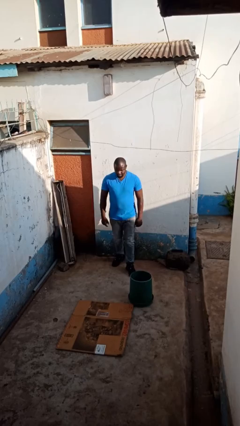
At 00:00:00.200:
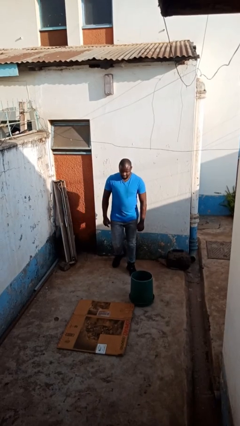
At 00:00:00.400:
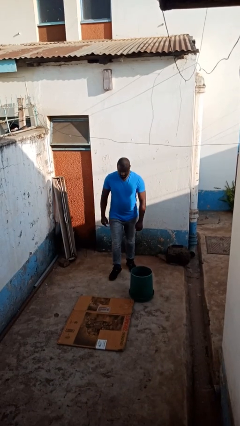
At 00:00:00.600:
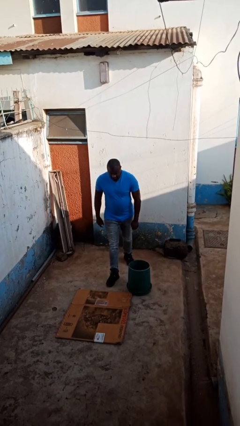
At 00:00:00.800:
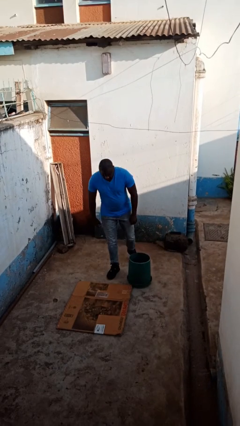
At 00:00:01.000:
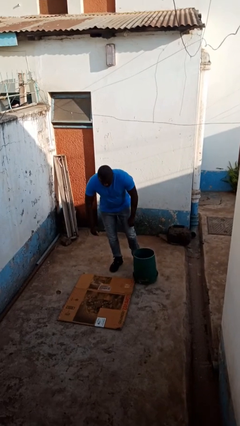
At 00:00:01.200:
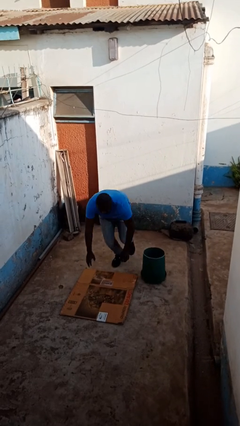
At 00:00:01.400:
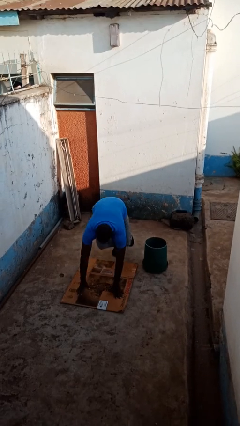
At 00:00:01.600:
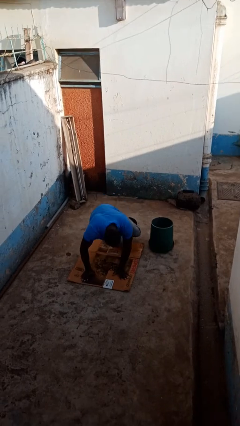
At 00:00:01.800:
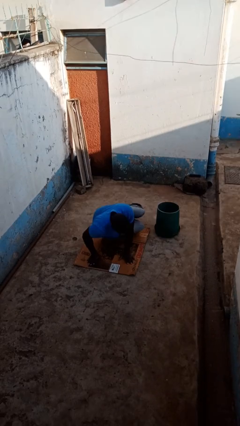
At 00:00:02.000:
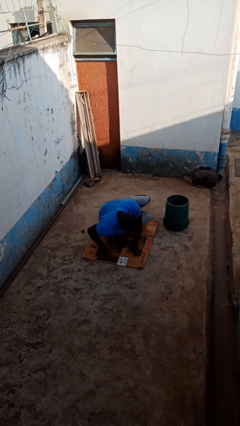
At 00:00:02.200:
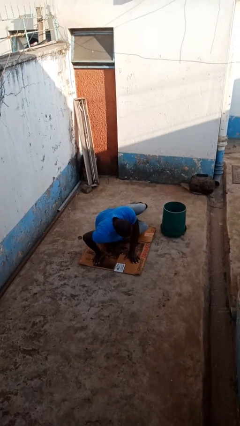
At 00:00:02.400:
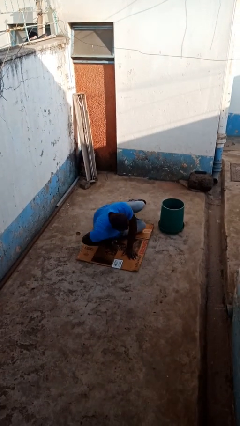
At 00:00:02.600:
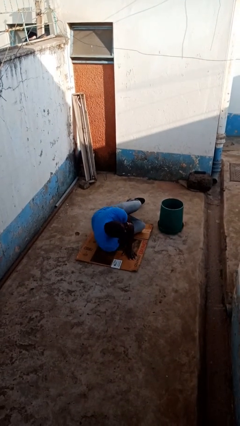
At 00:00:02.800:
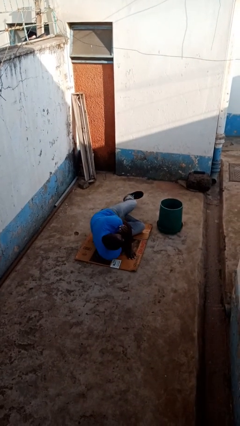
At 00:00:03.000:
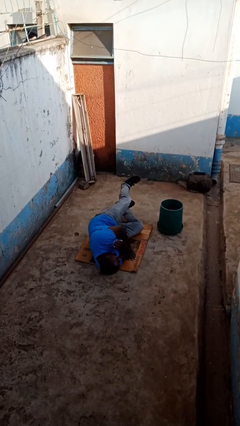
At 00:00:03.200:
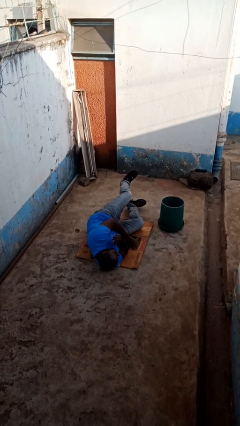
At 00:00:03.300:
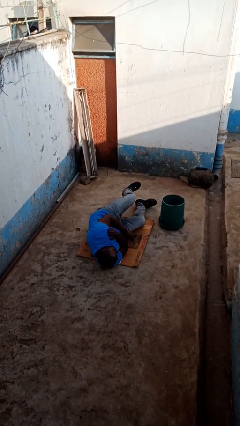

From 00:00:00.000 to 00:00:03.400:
person trips on object on floor

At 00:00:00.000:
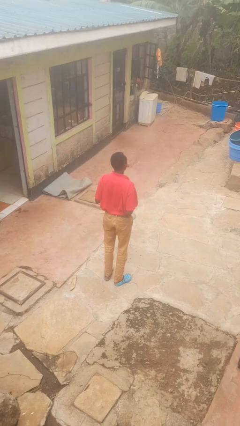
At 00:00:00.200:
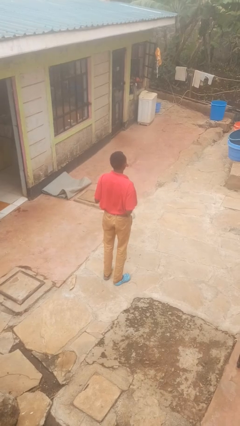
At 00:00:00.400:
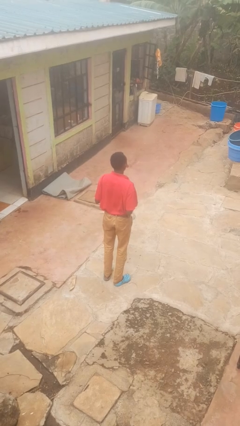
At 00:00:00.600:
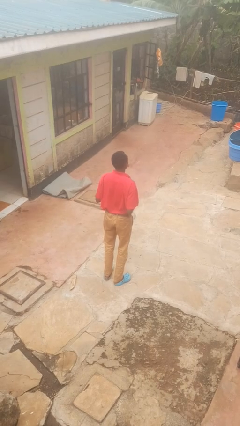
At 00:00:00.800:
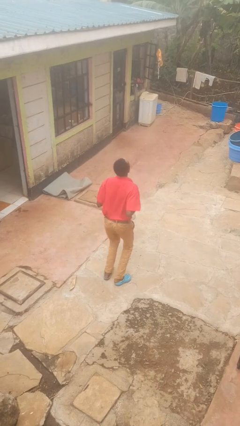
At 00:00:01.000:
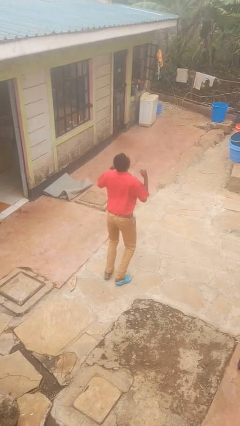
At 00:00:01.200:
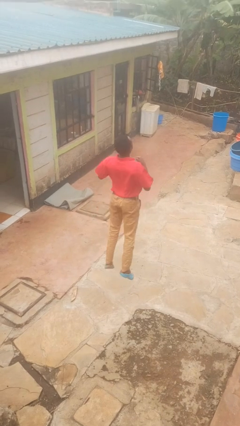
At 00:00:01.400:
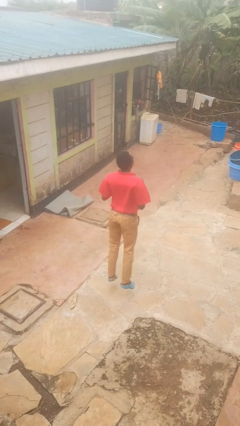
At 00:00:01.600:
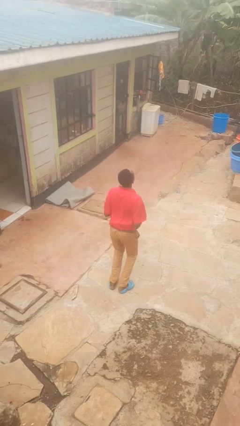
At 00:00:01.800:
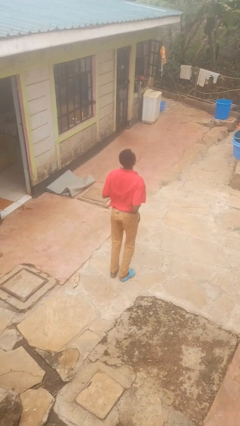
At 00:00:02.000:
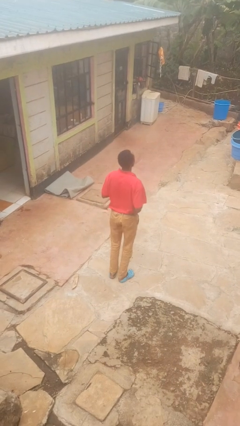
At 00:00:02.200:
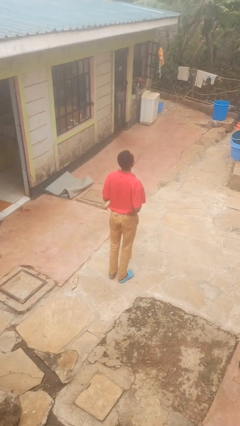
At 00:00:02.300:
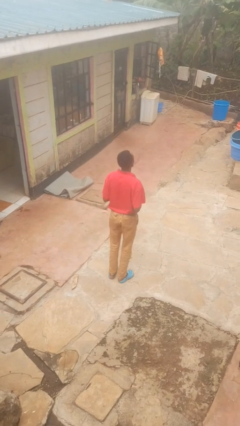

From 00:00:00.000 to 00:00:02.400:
person jumps

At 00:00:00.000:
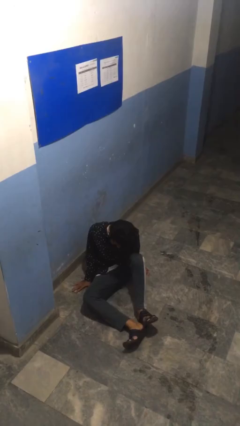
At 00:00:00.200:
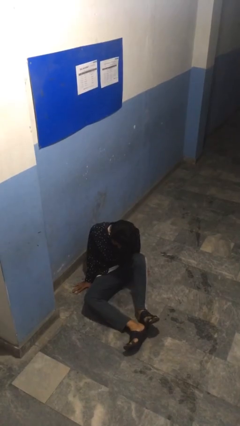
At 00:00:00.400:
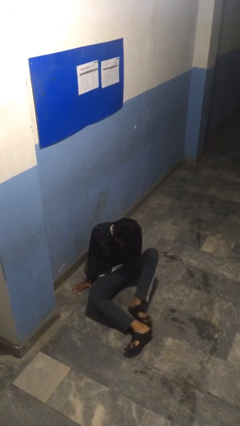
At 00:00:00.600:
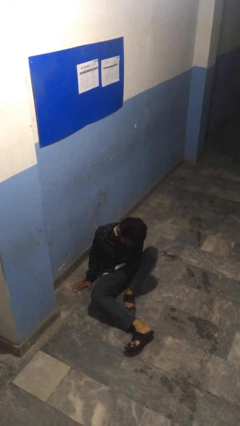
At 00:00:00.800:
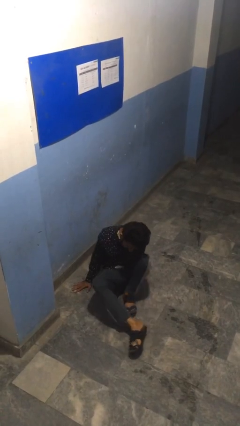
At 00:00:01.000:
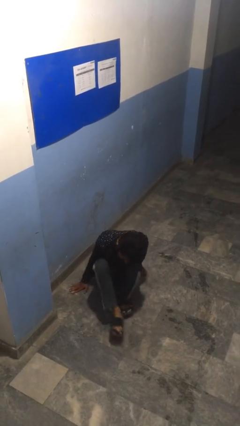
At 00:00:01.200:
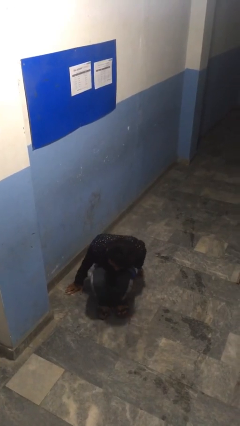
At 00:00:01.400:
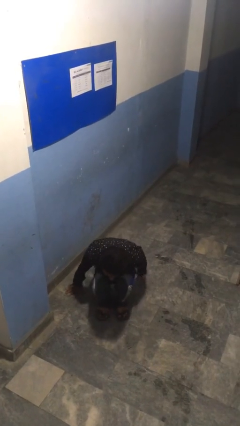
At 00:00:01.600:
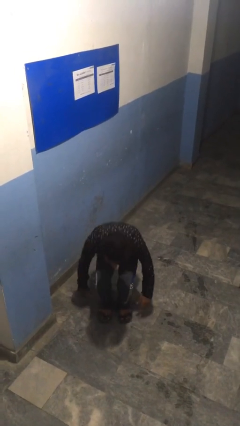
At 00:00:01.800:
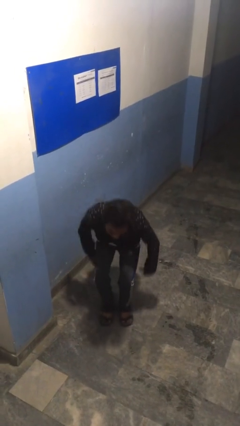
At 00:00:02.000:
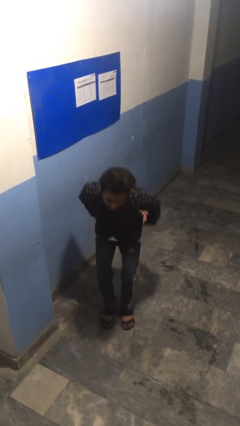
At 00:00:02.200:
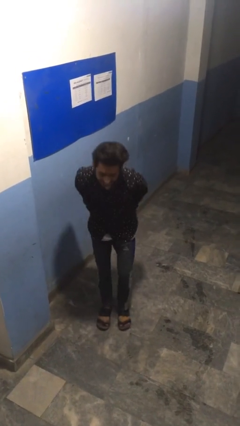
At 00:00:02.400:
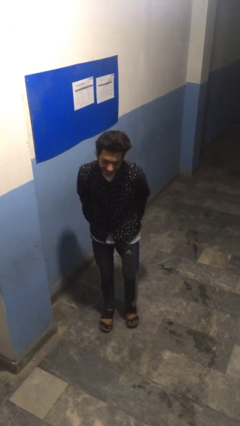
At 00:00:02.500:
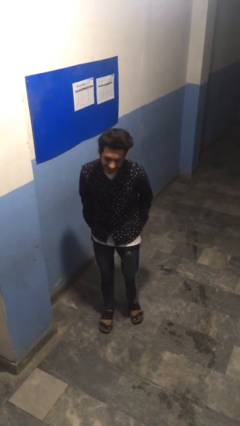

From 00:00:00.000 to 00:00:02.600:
person stands up from floor

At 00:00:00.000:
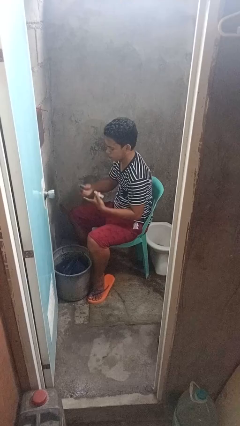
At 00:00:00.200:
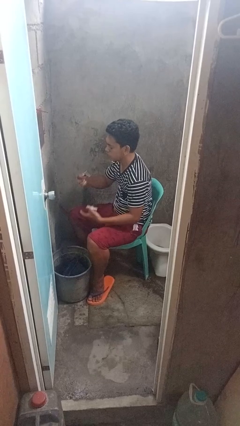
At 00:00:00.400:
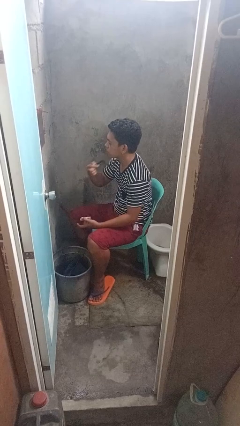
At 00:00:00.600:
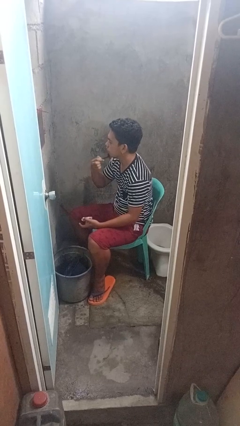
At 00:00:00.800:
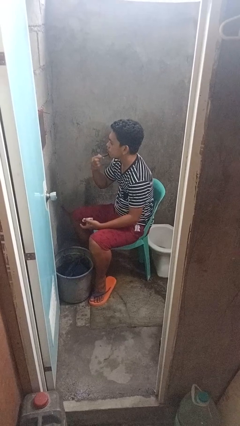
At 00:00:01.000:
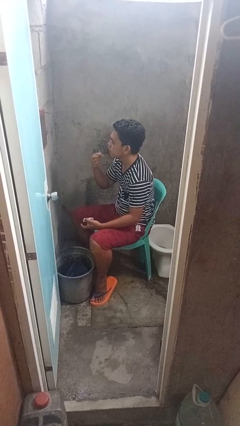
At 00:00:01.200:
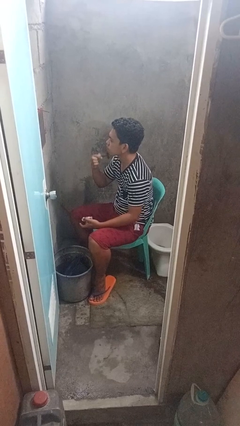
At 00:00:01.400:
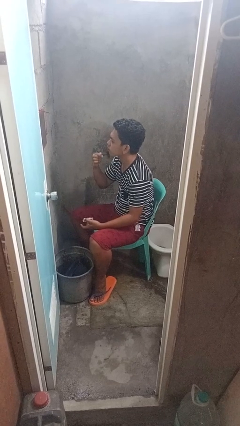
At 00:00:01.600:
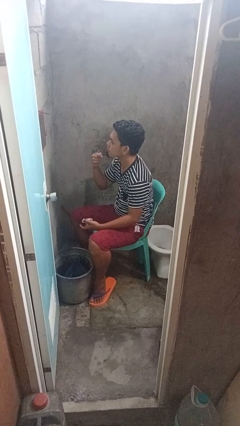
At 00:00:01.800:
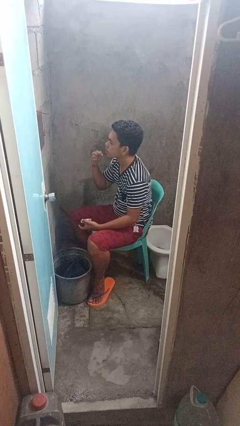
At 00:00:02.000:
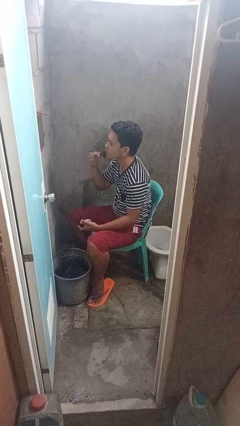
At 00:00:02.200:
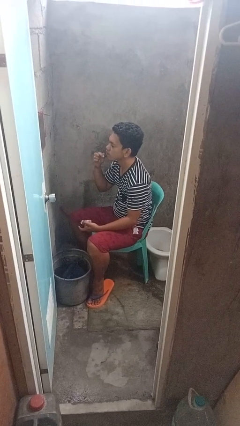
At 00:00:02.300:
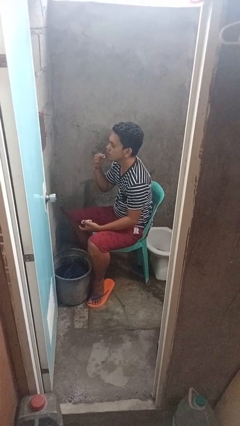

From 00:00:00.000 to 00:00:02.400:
person shaves face

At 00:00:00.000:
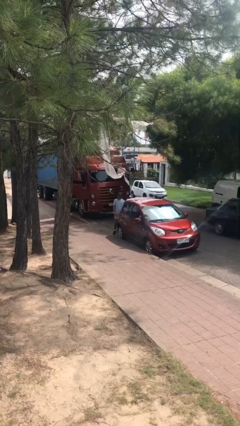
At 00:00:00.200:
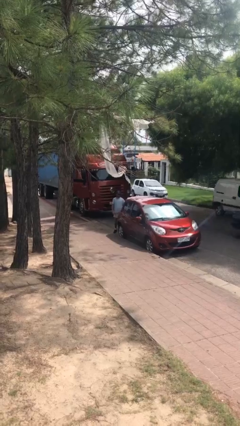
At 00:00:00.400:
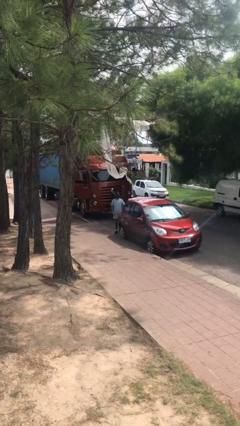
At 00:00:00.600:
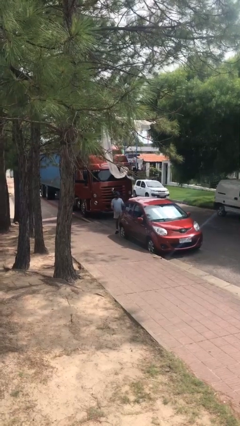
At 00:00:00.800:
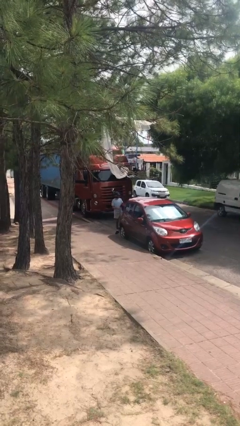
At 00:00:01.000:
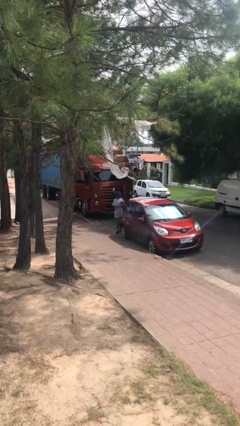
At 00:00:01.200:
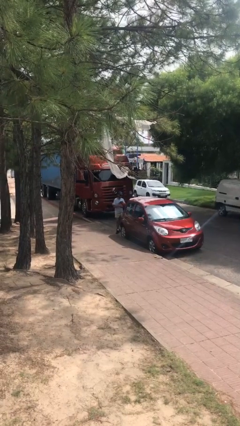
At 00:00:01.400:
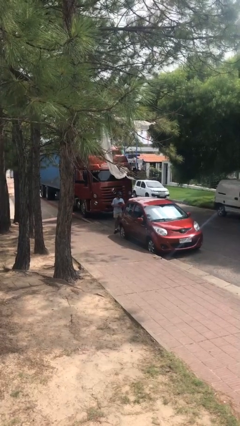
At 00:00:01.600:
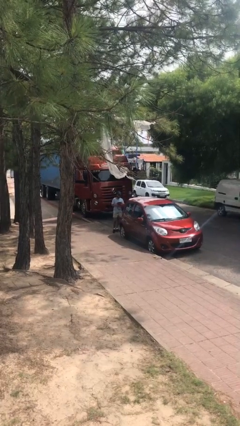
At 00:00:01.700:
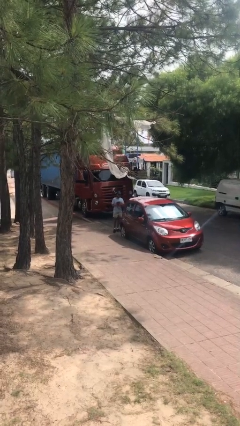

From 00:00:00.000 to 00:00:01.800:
person unloads car

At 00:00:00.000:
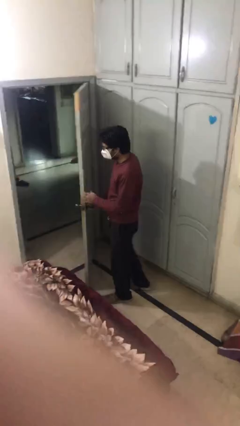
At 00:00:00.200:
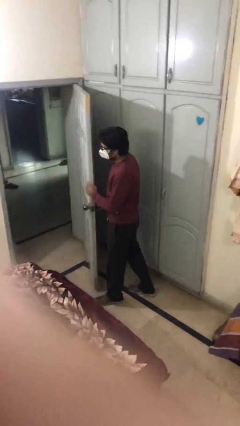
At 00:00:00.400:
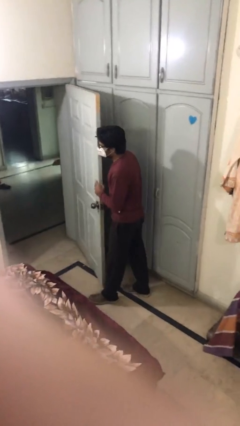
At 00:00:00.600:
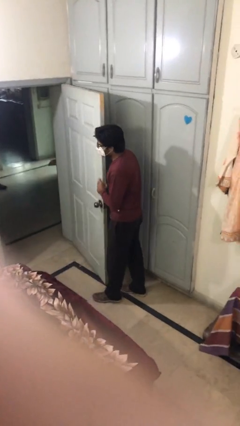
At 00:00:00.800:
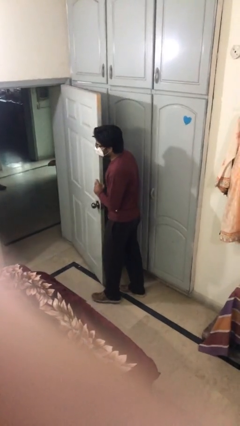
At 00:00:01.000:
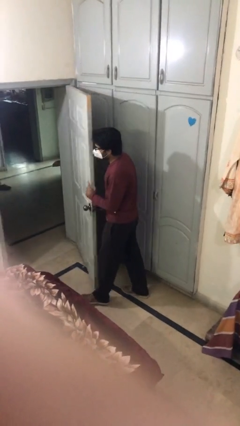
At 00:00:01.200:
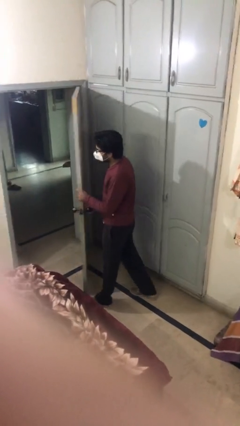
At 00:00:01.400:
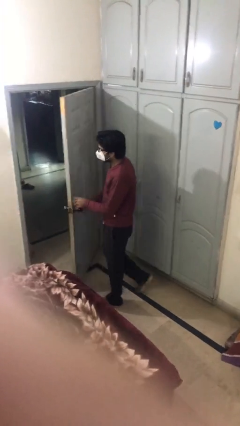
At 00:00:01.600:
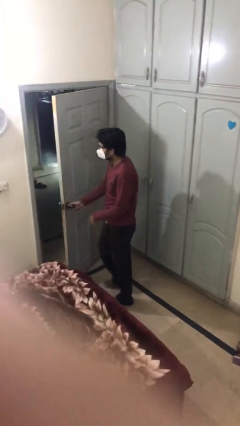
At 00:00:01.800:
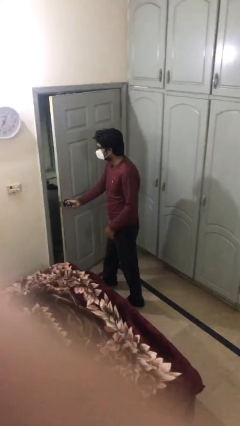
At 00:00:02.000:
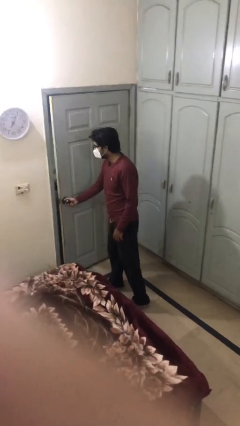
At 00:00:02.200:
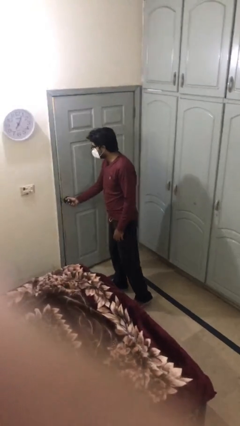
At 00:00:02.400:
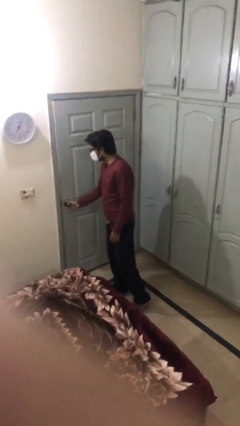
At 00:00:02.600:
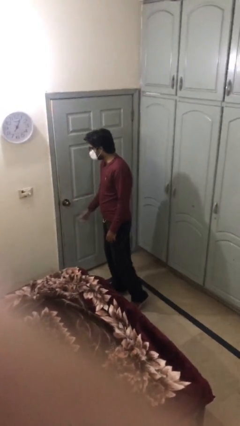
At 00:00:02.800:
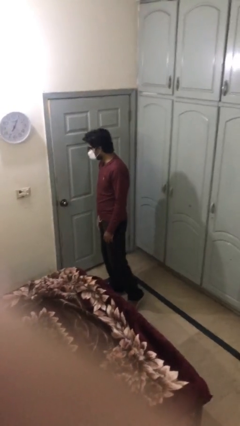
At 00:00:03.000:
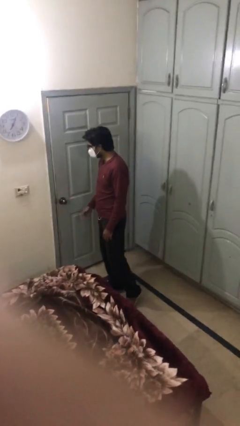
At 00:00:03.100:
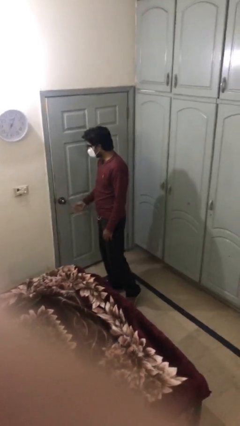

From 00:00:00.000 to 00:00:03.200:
person closes facility door

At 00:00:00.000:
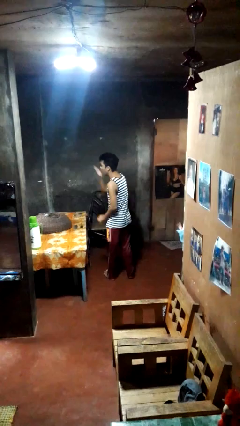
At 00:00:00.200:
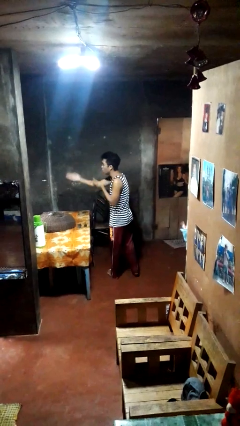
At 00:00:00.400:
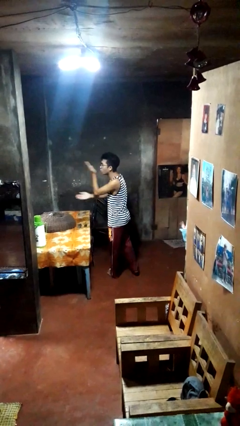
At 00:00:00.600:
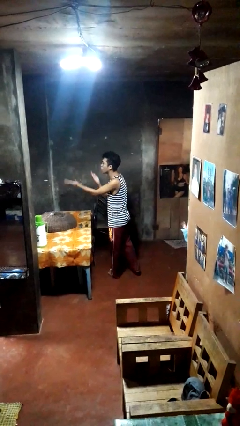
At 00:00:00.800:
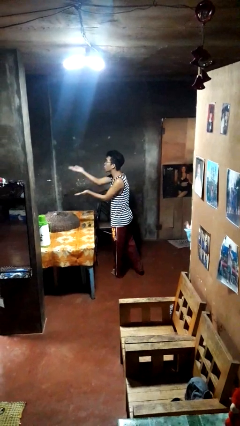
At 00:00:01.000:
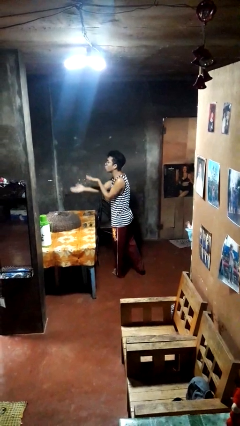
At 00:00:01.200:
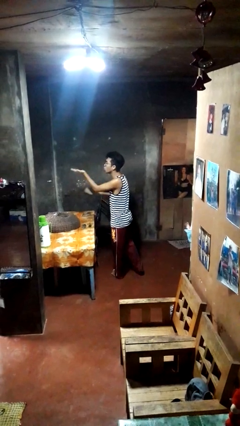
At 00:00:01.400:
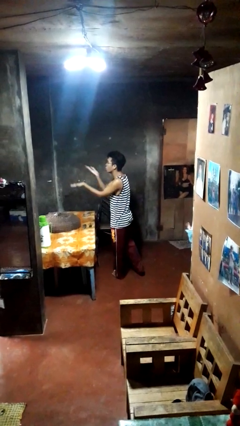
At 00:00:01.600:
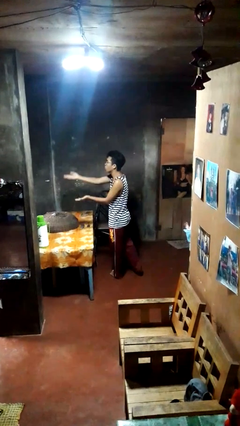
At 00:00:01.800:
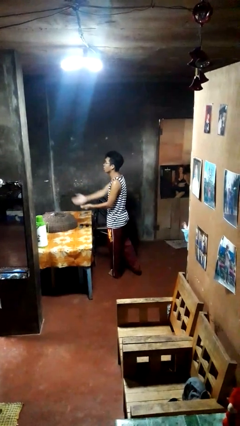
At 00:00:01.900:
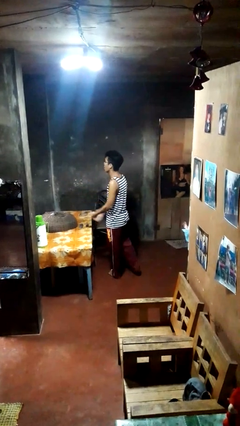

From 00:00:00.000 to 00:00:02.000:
person gestures blow kiss
